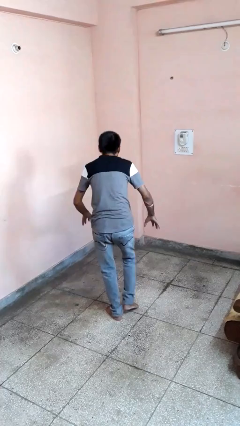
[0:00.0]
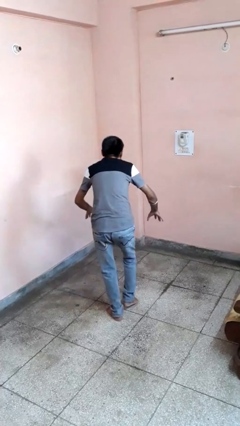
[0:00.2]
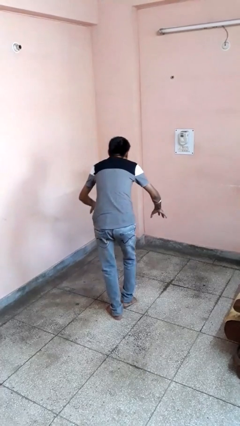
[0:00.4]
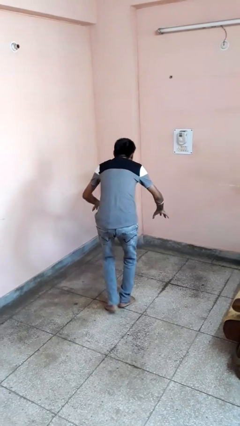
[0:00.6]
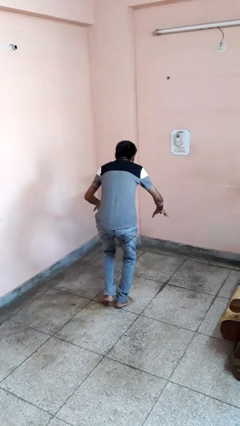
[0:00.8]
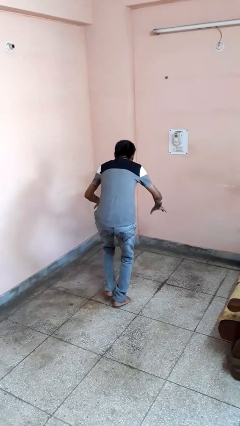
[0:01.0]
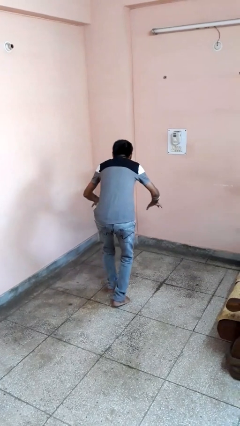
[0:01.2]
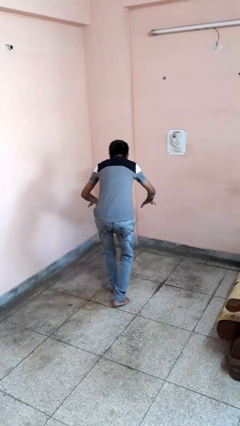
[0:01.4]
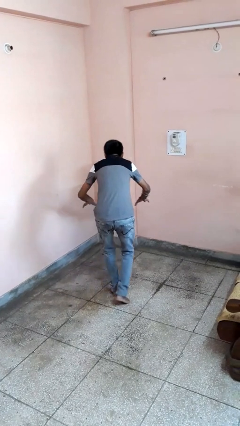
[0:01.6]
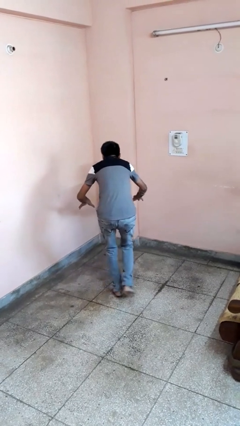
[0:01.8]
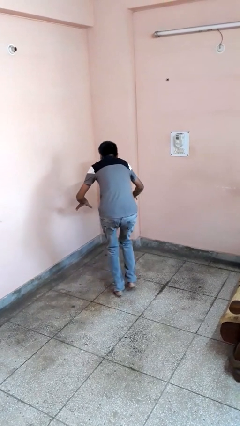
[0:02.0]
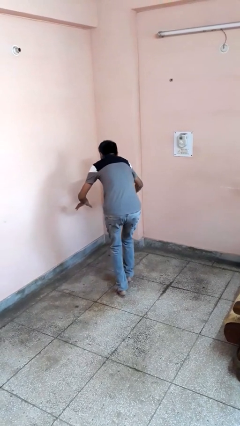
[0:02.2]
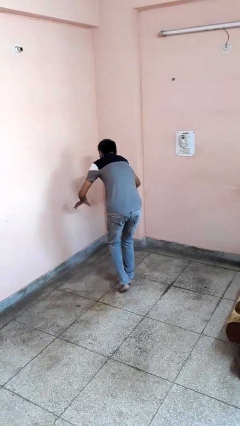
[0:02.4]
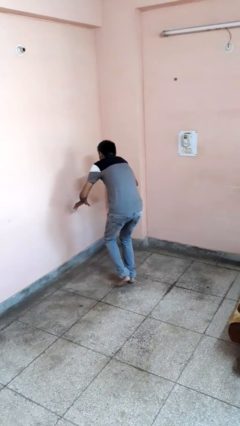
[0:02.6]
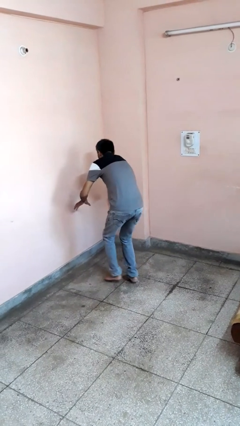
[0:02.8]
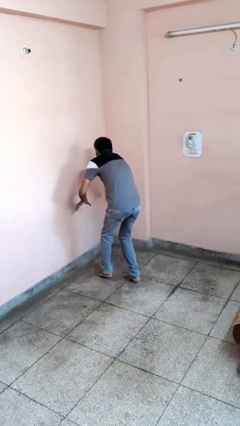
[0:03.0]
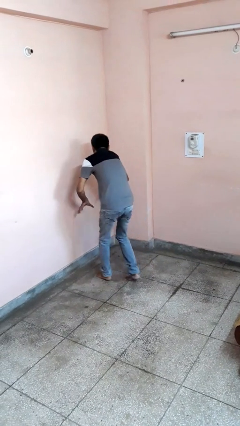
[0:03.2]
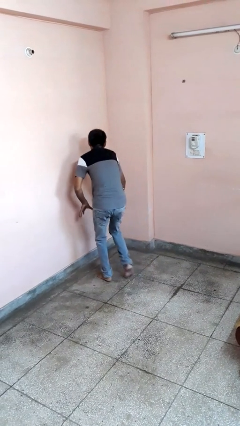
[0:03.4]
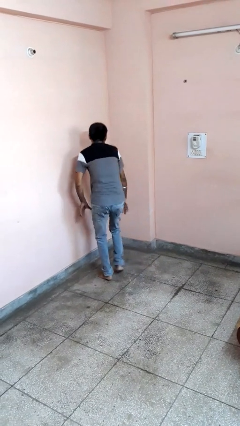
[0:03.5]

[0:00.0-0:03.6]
person walks tiptoe

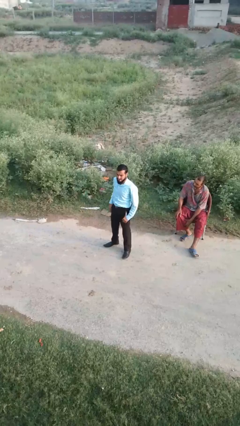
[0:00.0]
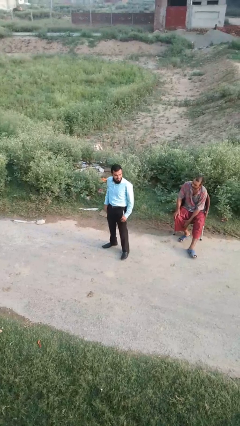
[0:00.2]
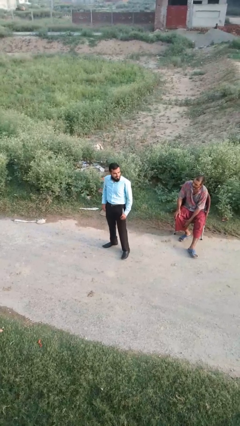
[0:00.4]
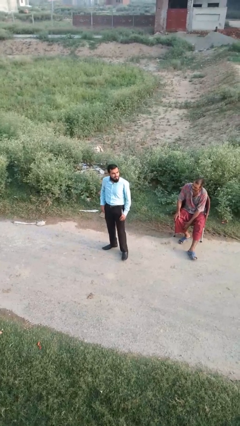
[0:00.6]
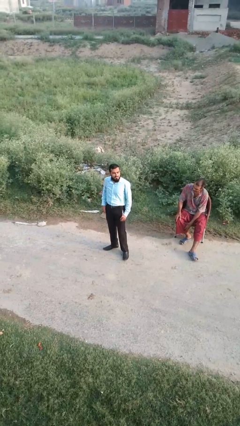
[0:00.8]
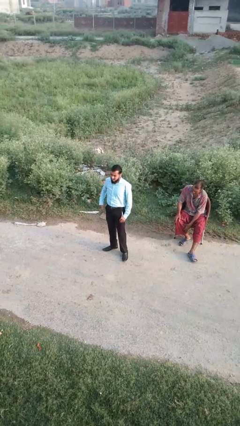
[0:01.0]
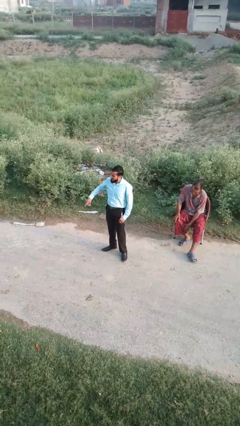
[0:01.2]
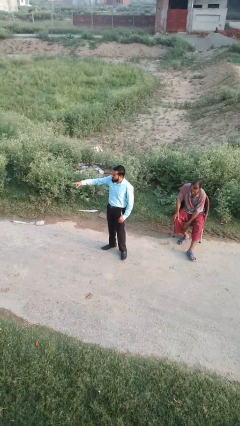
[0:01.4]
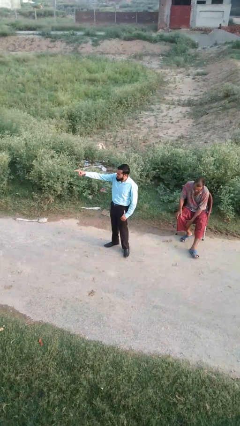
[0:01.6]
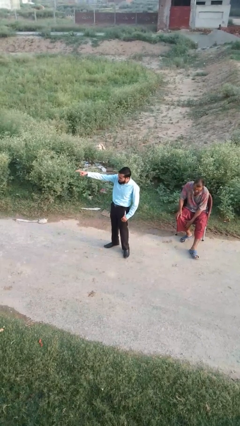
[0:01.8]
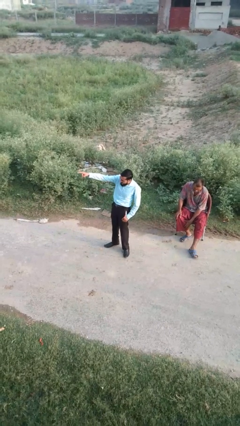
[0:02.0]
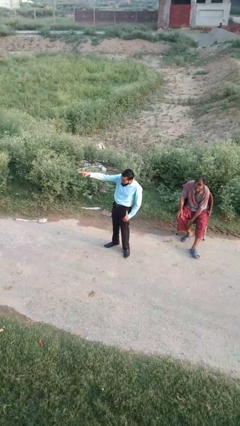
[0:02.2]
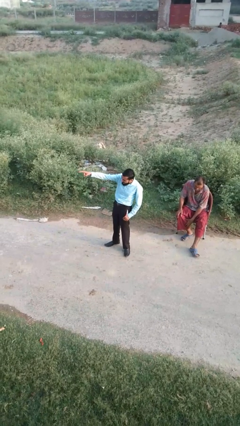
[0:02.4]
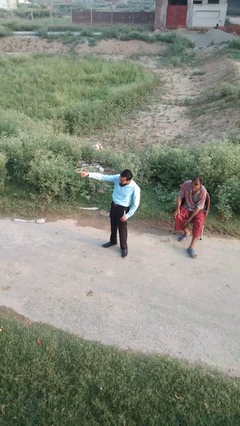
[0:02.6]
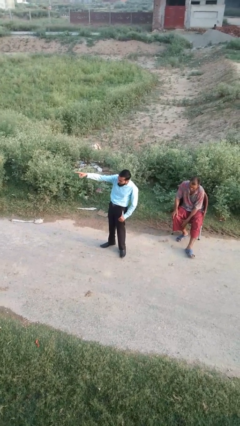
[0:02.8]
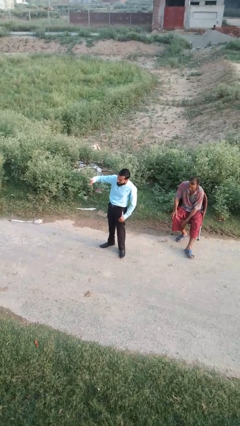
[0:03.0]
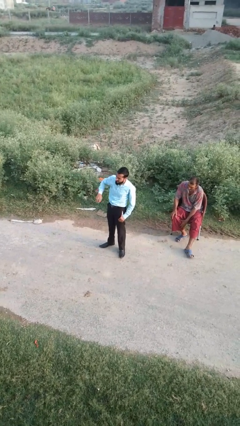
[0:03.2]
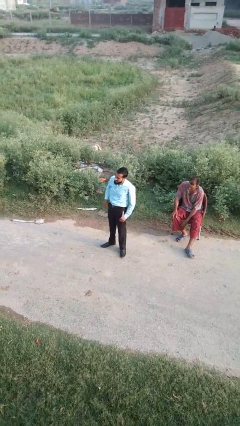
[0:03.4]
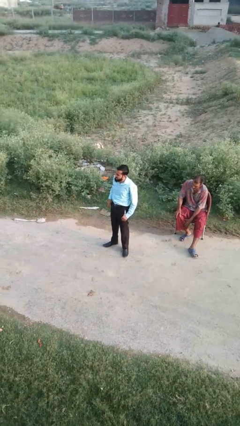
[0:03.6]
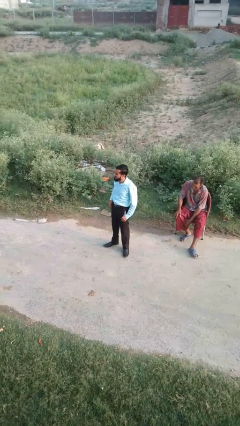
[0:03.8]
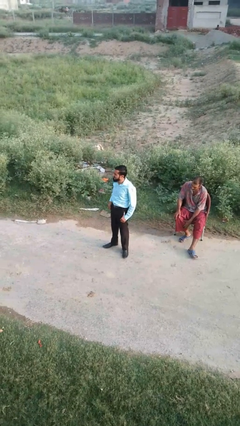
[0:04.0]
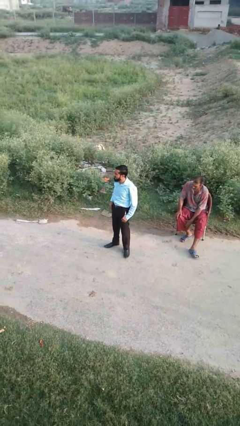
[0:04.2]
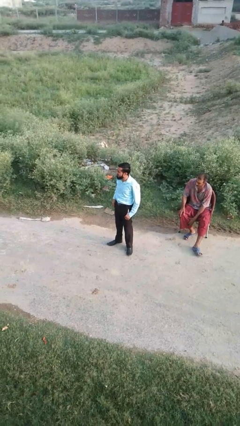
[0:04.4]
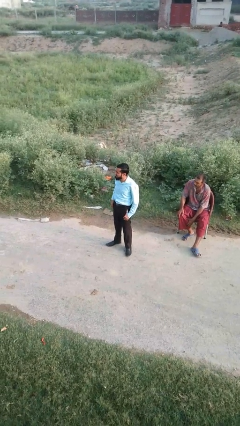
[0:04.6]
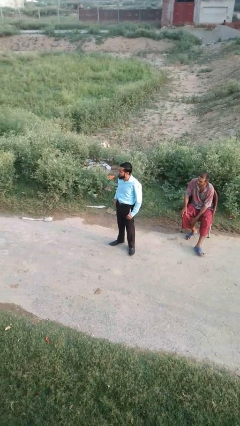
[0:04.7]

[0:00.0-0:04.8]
person points at person

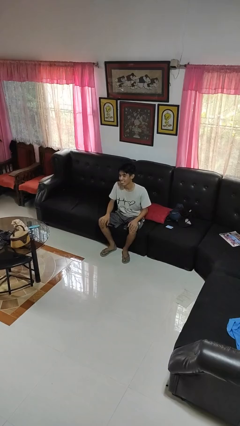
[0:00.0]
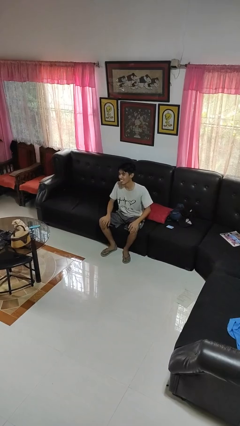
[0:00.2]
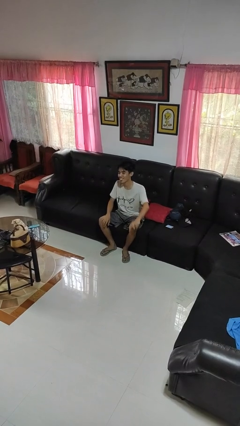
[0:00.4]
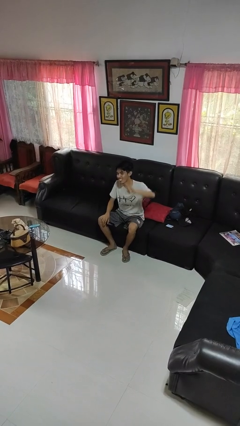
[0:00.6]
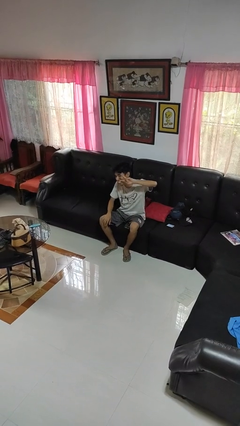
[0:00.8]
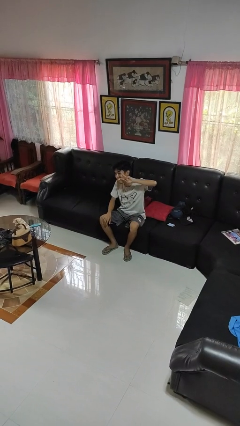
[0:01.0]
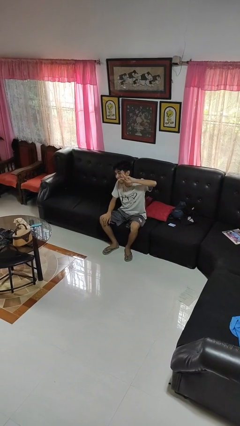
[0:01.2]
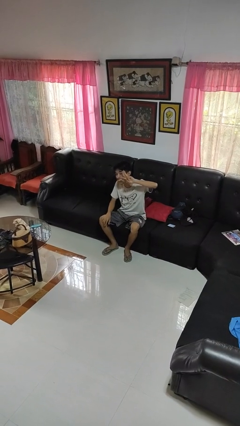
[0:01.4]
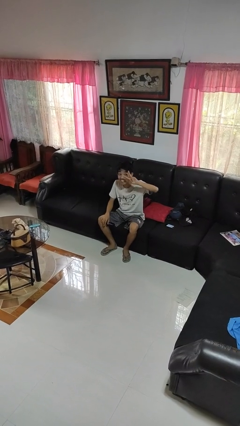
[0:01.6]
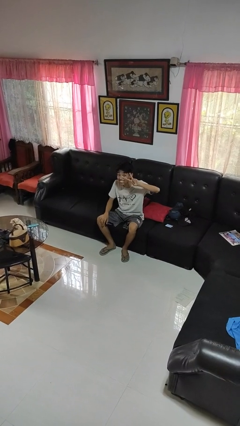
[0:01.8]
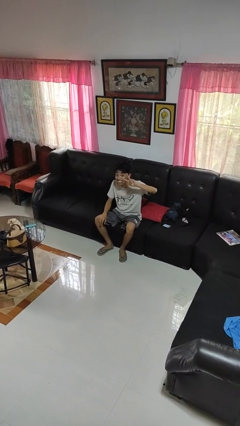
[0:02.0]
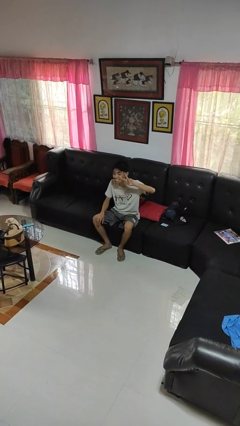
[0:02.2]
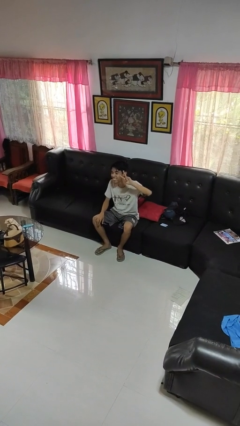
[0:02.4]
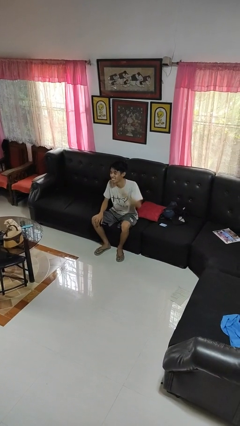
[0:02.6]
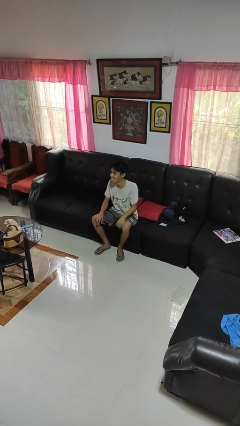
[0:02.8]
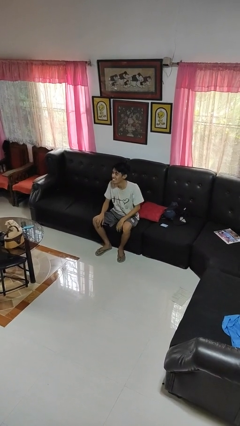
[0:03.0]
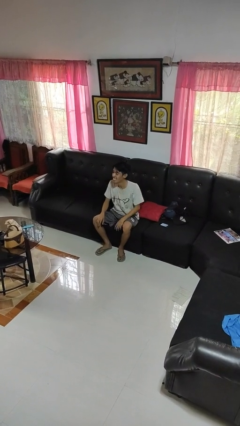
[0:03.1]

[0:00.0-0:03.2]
person gestures peace

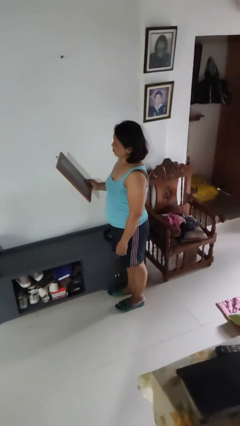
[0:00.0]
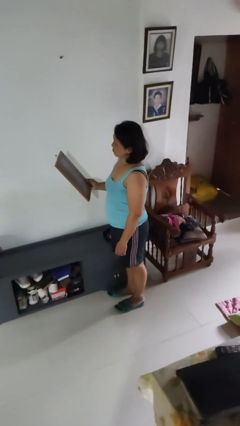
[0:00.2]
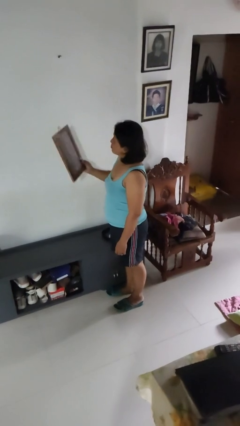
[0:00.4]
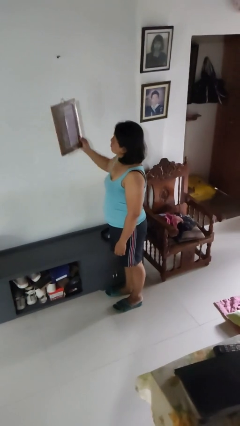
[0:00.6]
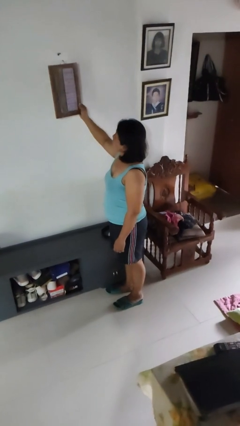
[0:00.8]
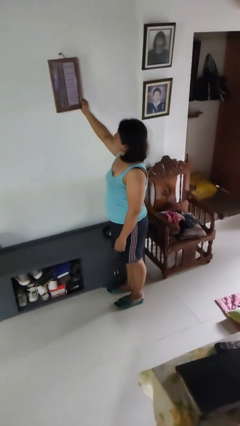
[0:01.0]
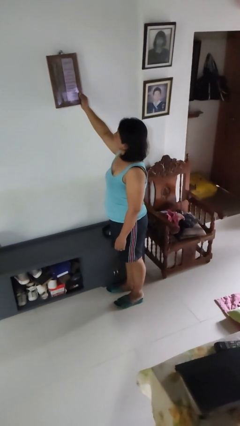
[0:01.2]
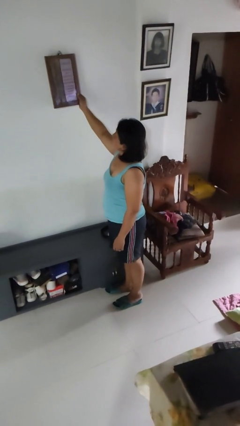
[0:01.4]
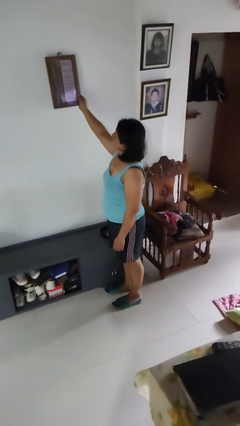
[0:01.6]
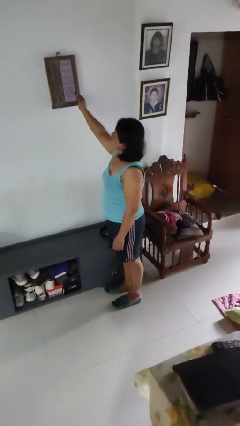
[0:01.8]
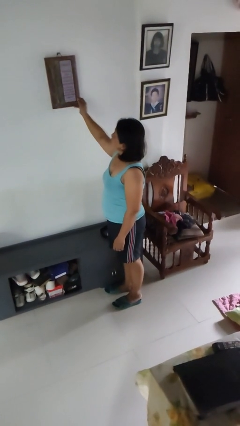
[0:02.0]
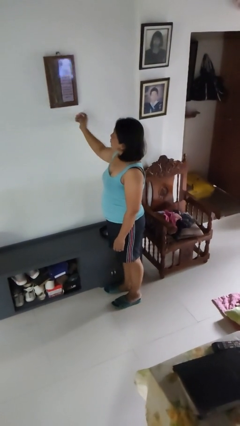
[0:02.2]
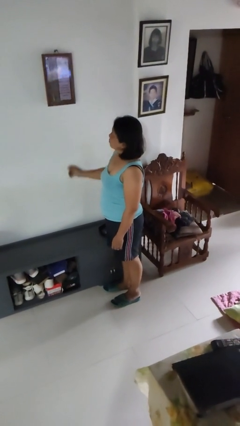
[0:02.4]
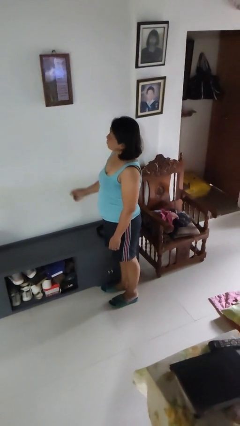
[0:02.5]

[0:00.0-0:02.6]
person puts up picture frame

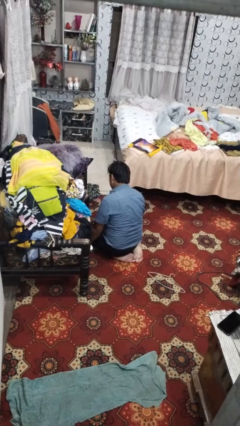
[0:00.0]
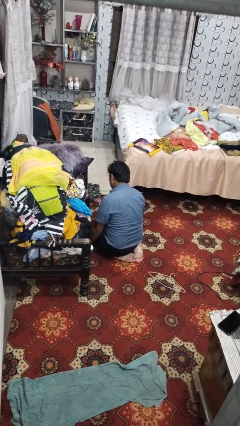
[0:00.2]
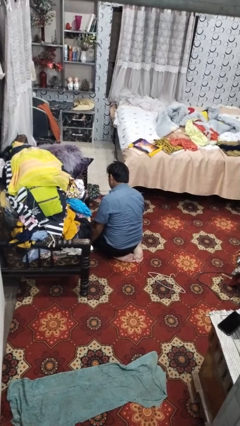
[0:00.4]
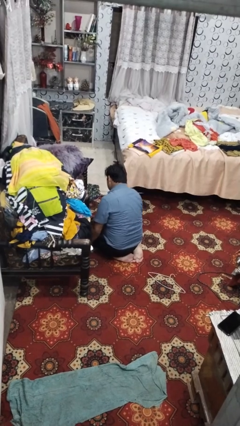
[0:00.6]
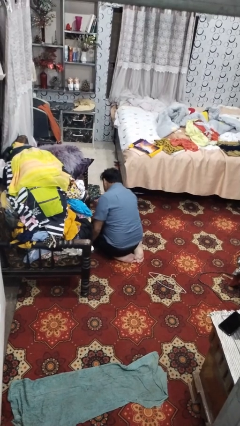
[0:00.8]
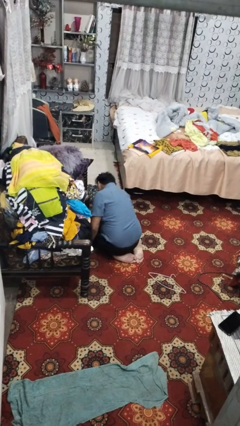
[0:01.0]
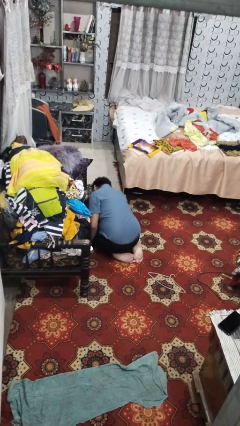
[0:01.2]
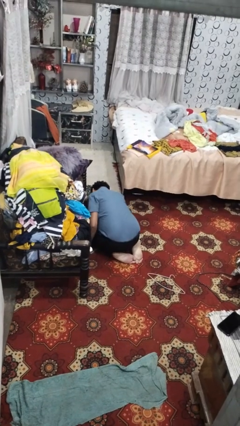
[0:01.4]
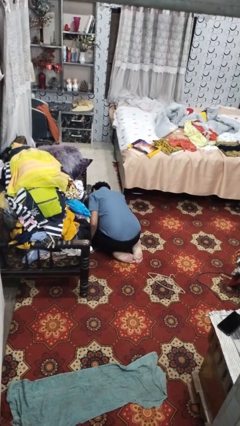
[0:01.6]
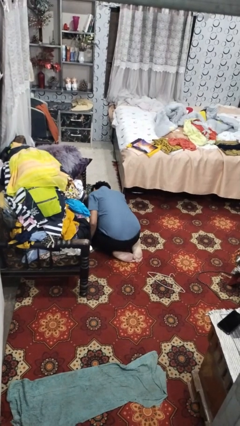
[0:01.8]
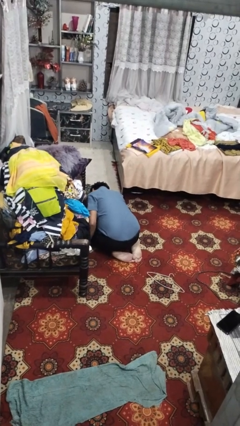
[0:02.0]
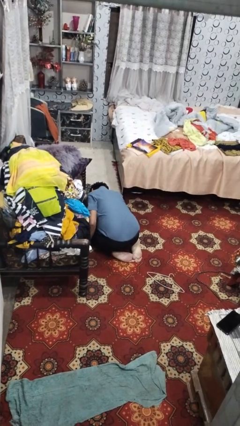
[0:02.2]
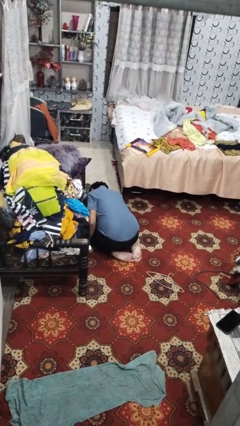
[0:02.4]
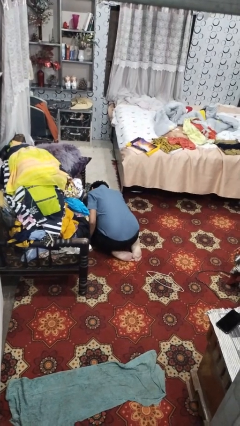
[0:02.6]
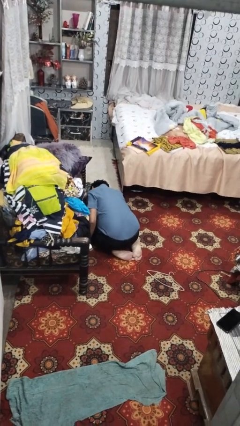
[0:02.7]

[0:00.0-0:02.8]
person searches under couch

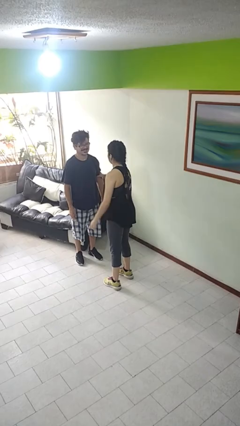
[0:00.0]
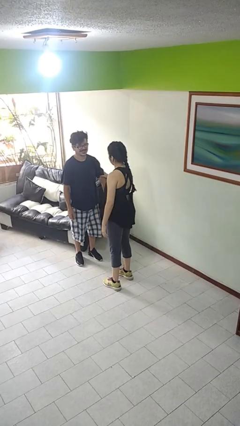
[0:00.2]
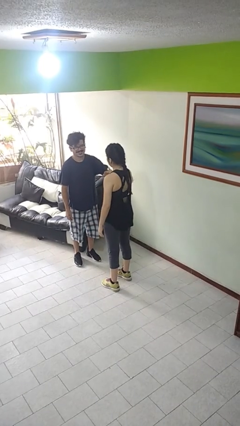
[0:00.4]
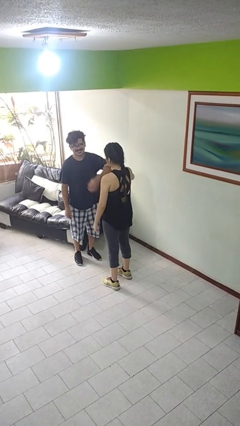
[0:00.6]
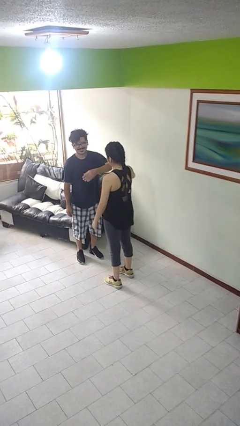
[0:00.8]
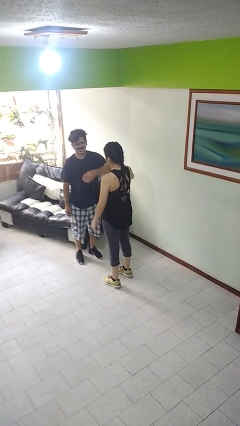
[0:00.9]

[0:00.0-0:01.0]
person grabs person by bicep
